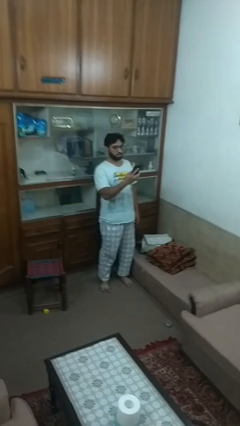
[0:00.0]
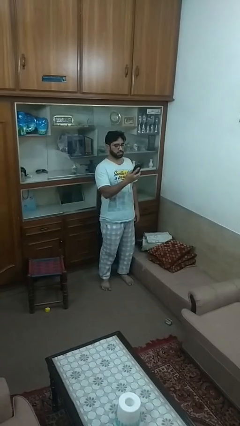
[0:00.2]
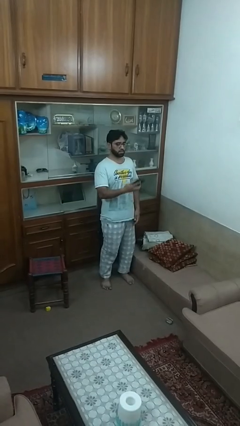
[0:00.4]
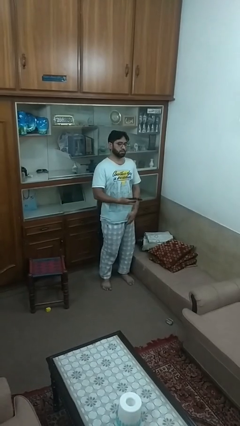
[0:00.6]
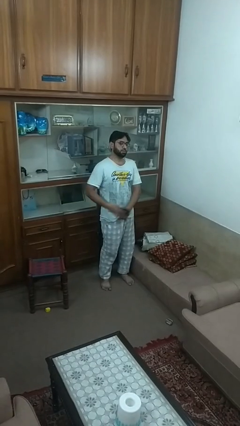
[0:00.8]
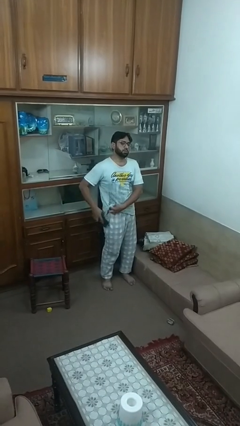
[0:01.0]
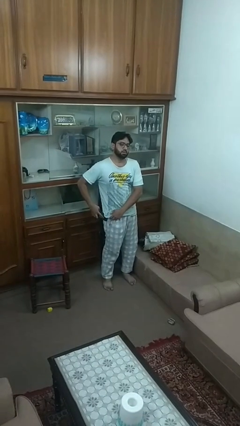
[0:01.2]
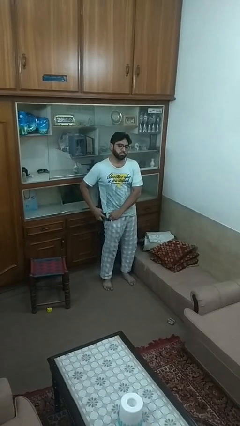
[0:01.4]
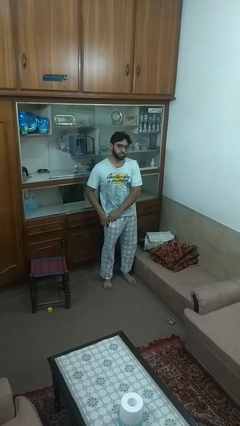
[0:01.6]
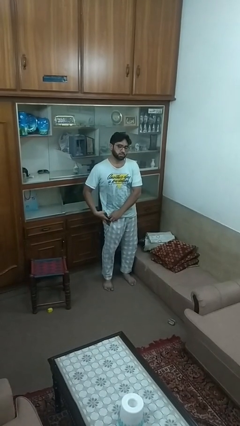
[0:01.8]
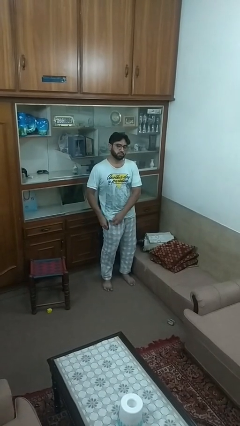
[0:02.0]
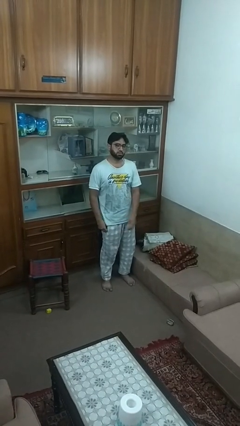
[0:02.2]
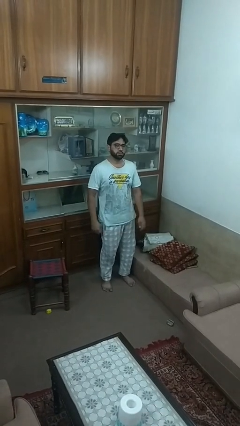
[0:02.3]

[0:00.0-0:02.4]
person puts phone into pocket

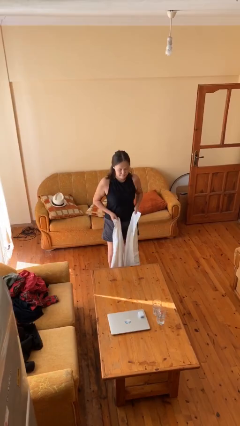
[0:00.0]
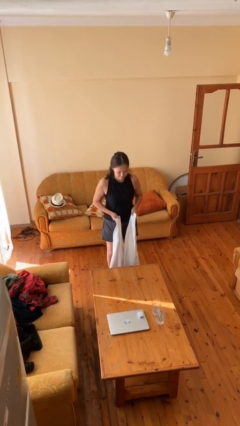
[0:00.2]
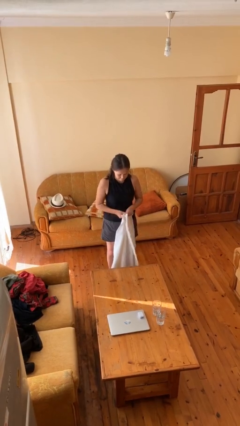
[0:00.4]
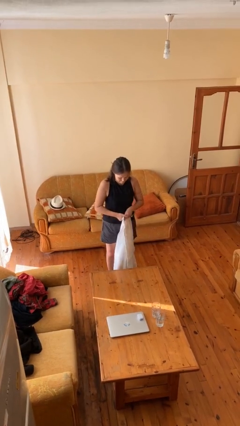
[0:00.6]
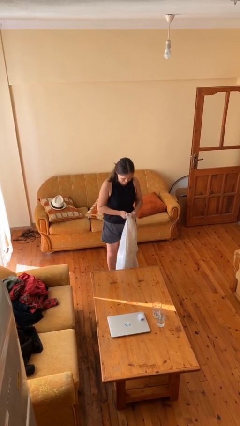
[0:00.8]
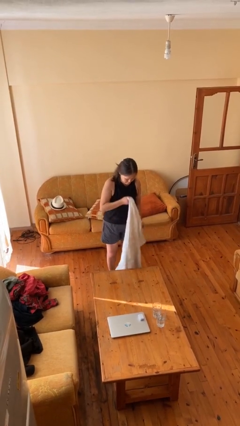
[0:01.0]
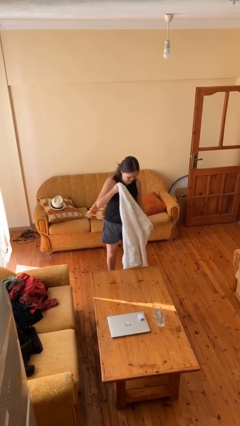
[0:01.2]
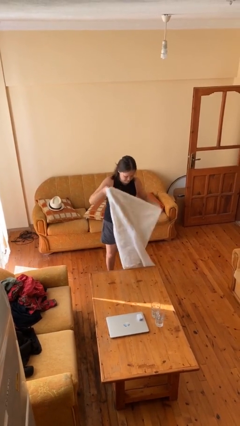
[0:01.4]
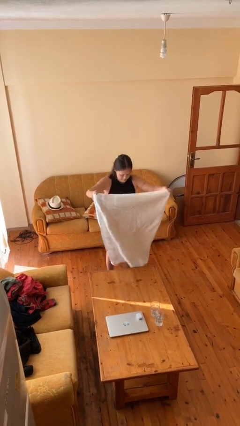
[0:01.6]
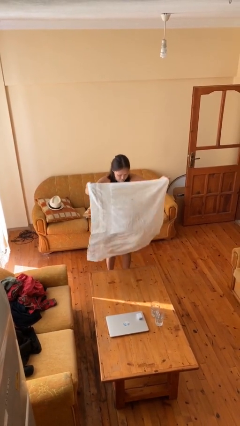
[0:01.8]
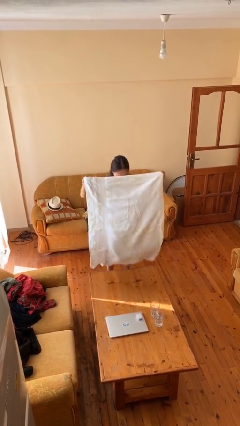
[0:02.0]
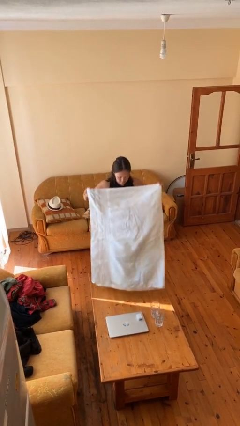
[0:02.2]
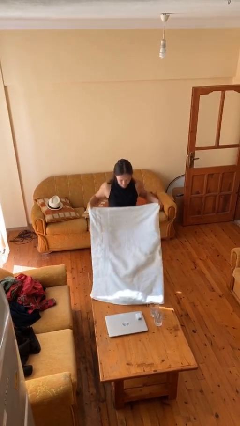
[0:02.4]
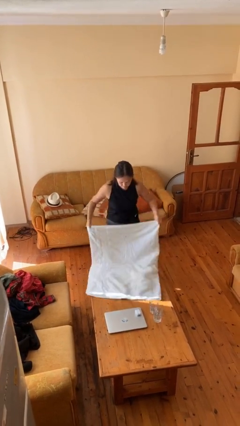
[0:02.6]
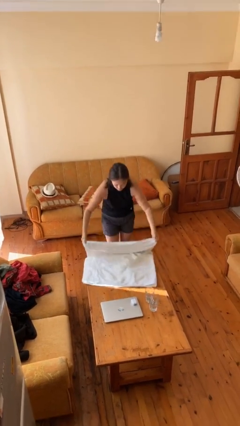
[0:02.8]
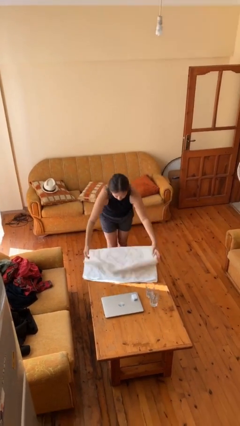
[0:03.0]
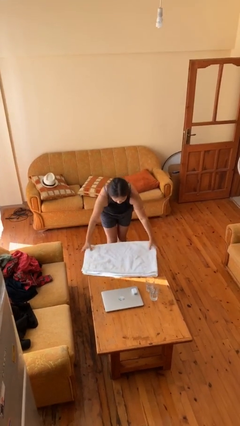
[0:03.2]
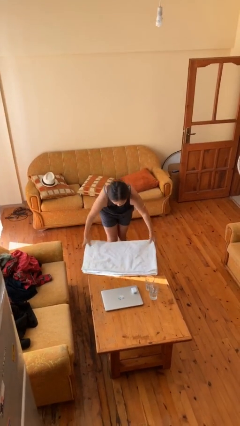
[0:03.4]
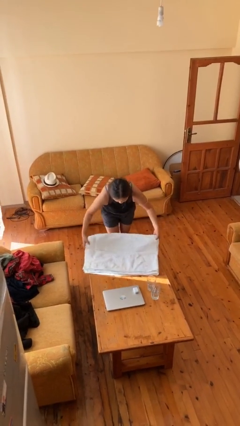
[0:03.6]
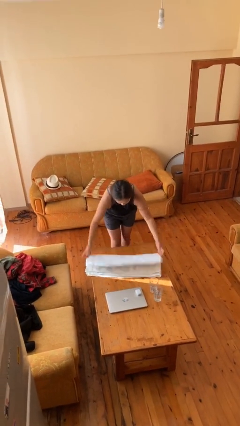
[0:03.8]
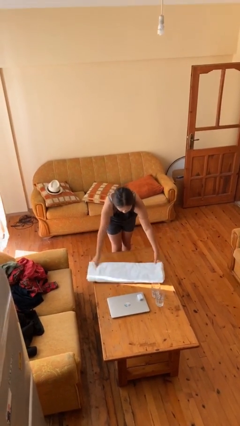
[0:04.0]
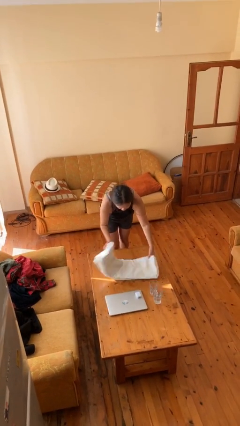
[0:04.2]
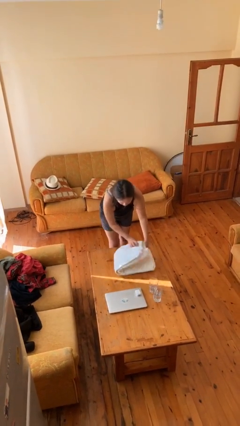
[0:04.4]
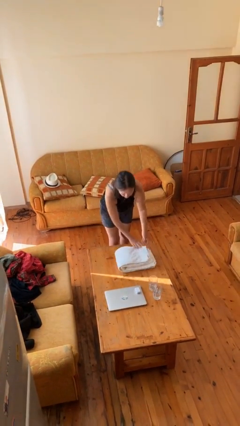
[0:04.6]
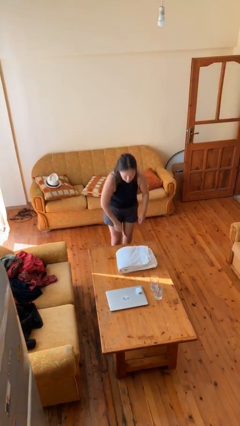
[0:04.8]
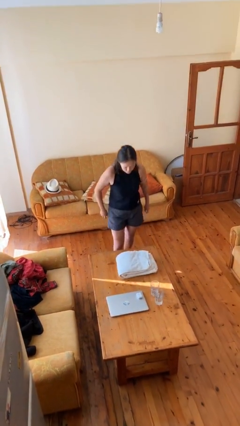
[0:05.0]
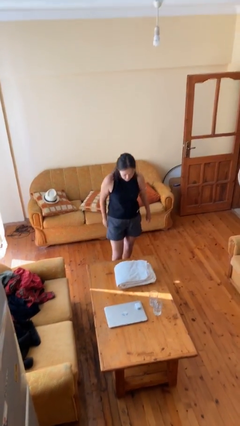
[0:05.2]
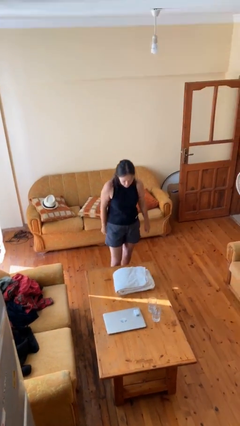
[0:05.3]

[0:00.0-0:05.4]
person folds towel

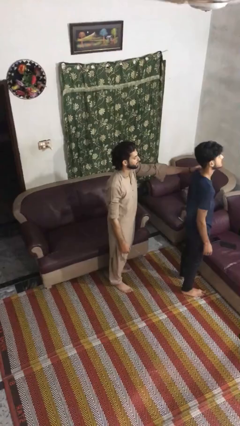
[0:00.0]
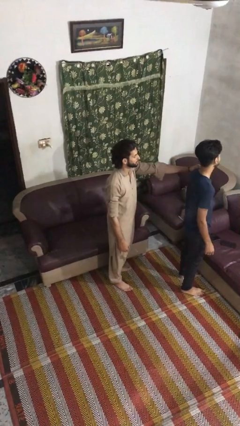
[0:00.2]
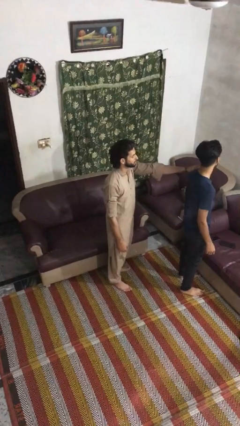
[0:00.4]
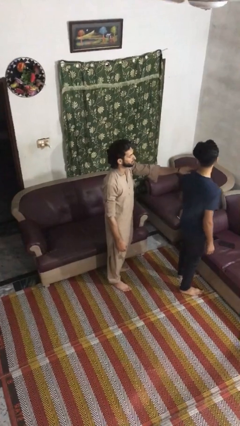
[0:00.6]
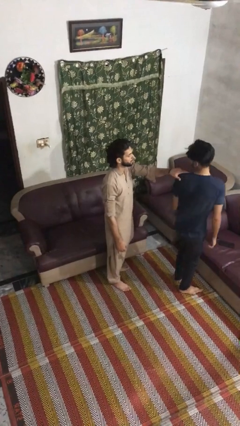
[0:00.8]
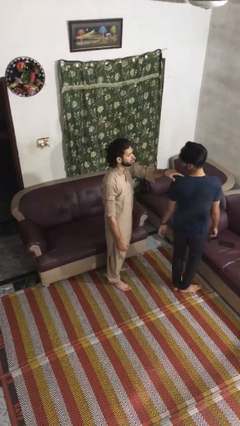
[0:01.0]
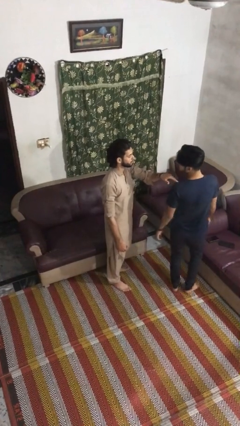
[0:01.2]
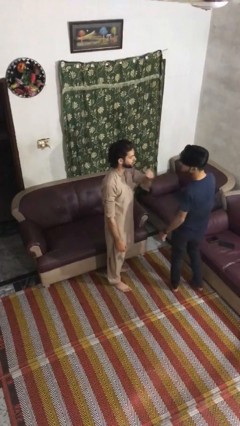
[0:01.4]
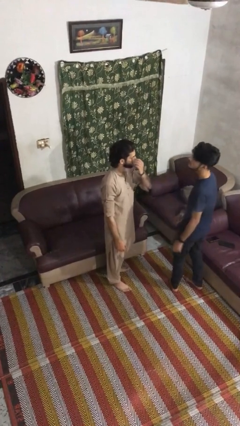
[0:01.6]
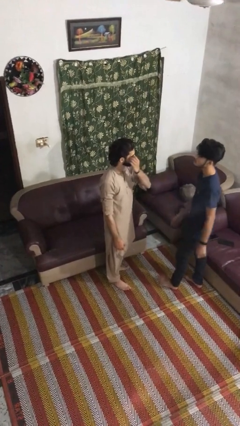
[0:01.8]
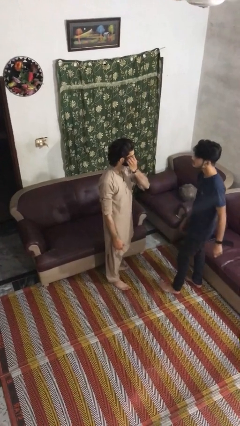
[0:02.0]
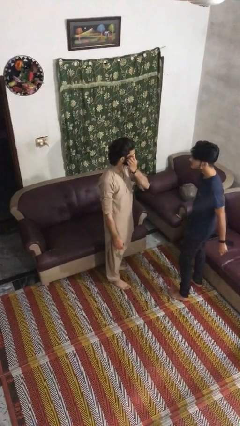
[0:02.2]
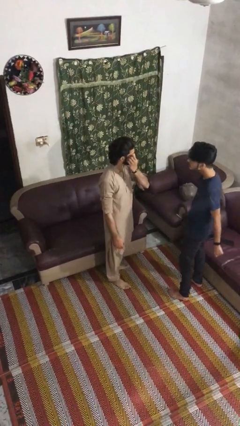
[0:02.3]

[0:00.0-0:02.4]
person spins person around

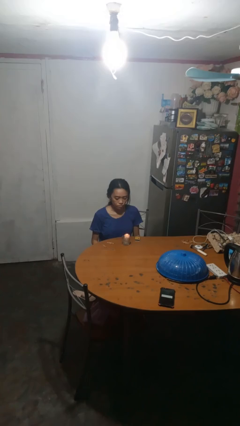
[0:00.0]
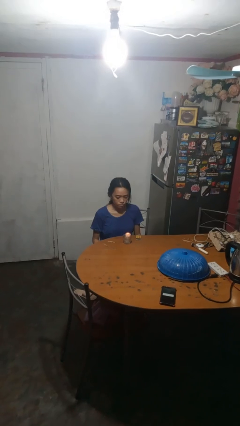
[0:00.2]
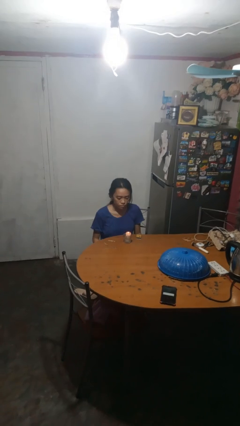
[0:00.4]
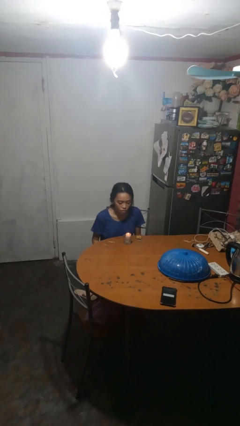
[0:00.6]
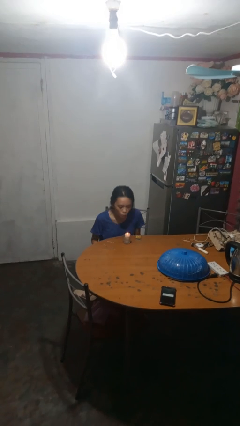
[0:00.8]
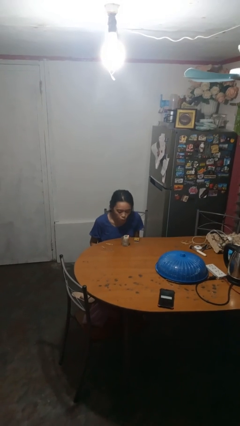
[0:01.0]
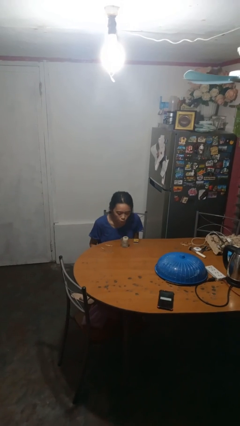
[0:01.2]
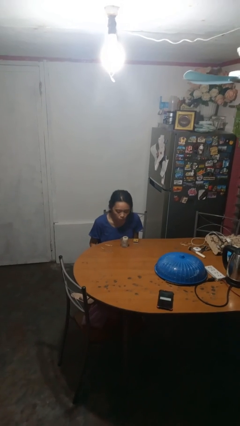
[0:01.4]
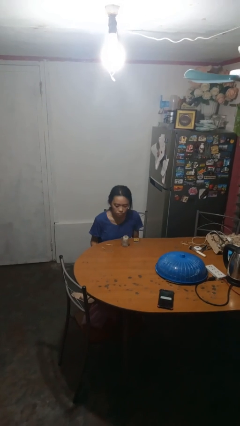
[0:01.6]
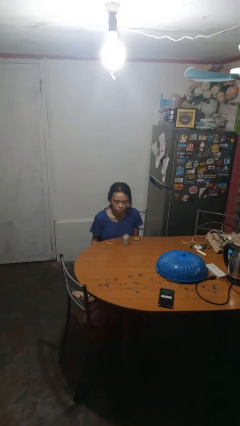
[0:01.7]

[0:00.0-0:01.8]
person extinguishes candle

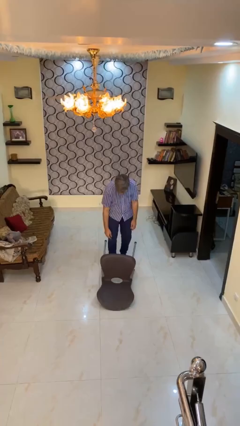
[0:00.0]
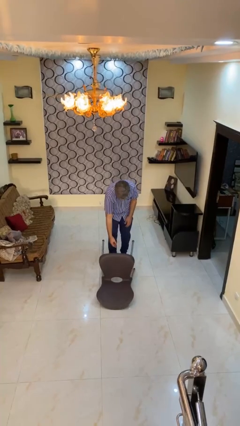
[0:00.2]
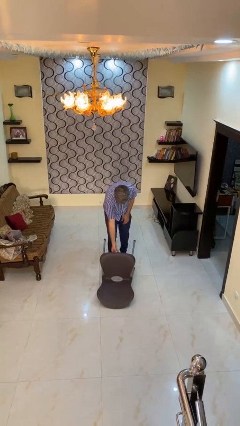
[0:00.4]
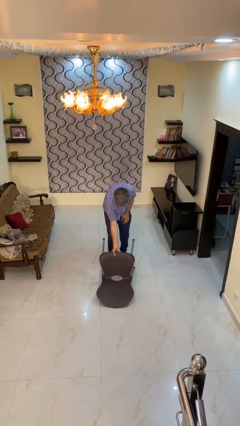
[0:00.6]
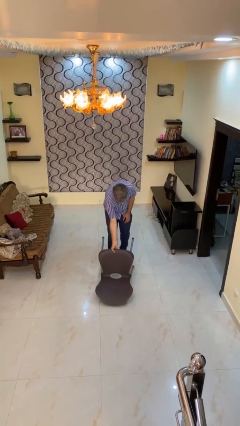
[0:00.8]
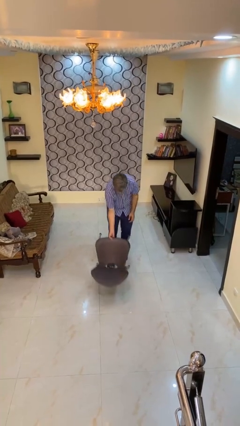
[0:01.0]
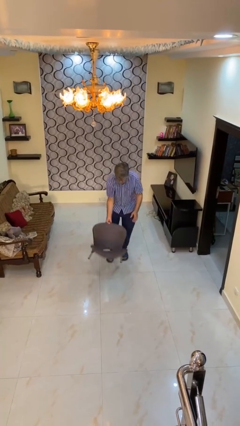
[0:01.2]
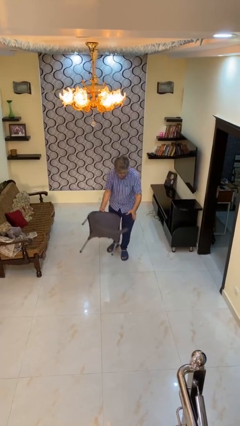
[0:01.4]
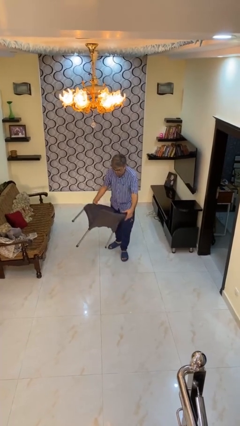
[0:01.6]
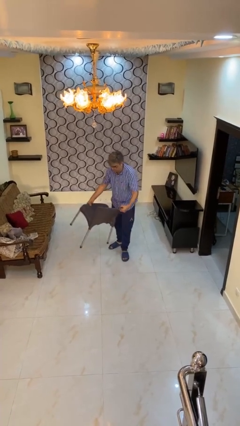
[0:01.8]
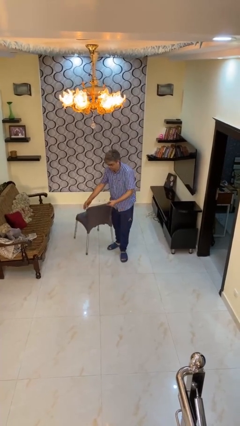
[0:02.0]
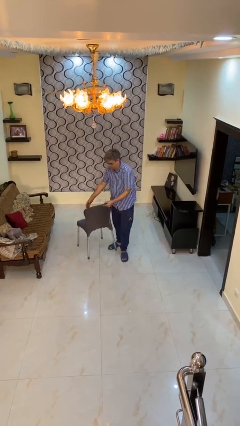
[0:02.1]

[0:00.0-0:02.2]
person sets upright furniture

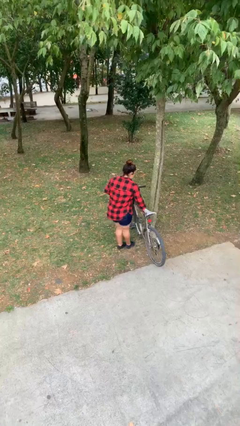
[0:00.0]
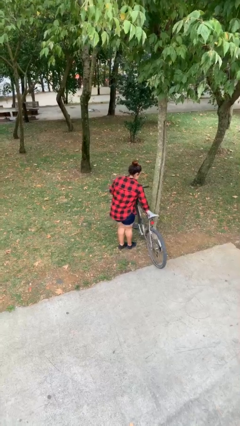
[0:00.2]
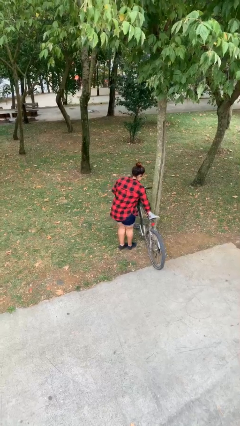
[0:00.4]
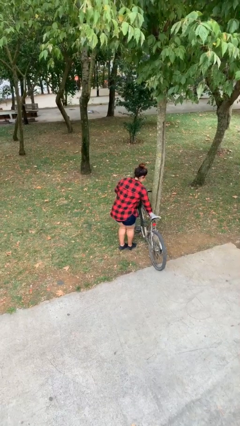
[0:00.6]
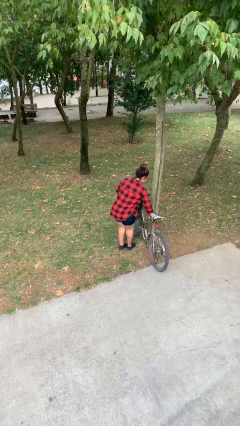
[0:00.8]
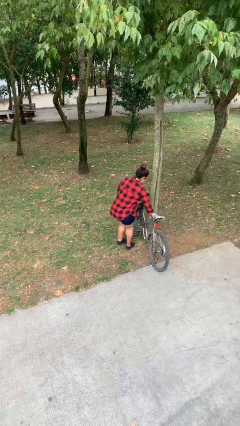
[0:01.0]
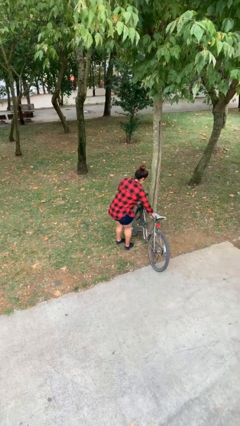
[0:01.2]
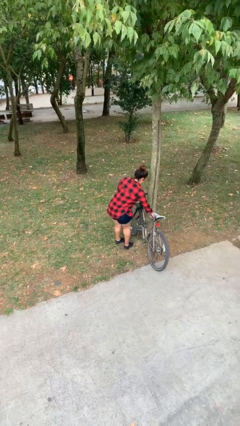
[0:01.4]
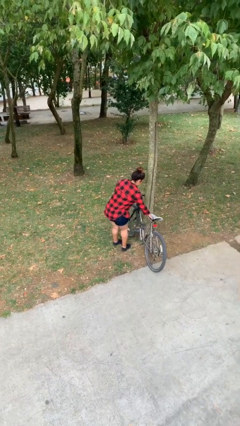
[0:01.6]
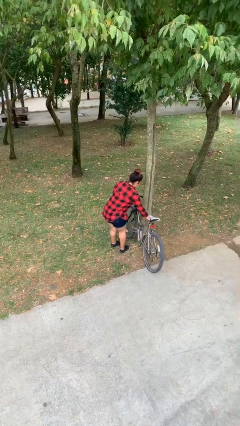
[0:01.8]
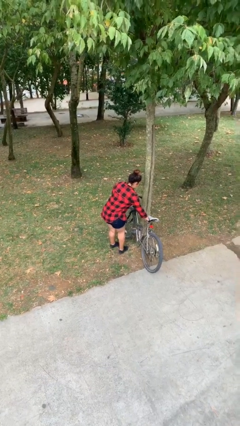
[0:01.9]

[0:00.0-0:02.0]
person puts down object on floor

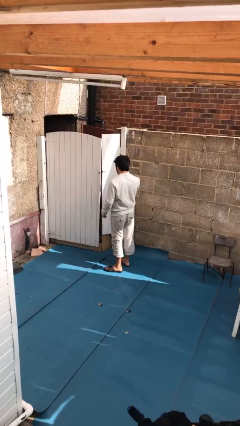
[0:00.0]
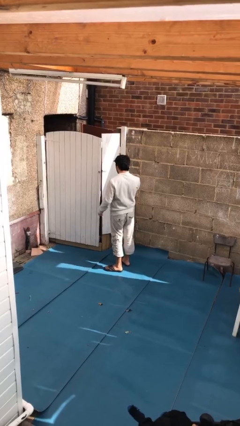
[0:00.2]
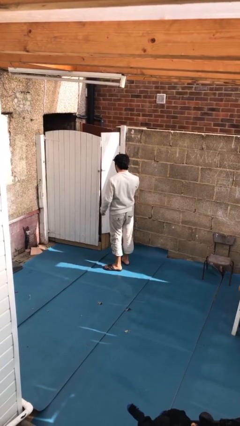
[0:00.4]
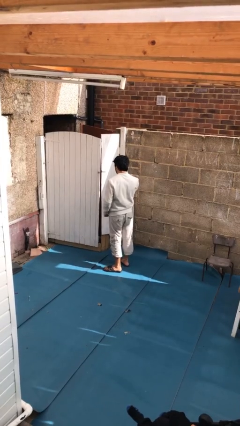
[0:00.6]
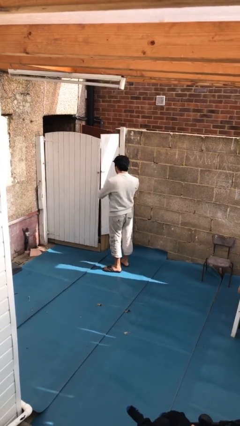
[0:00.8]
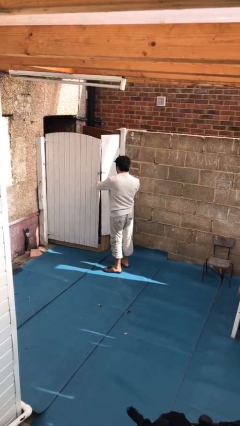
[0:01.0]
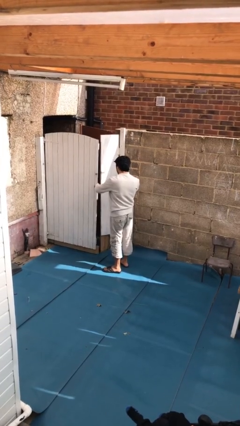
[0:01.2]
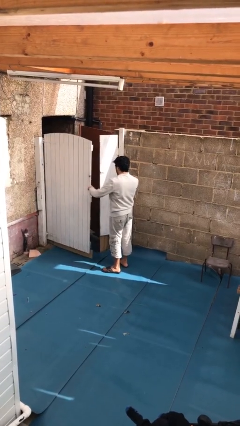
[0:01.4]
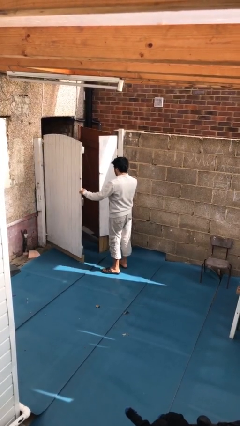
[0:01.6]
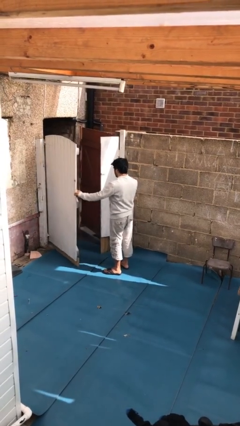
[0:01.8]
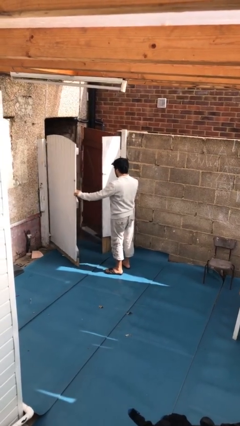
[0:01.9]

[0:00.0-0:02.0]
person opens facility door
